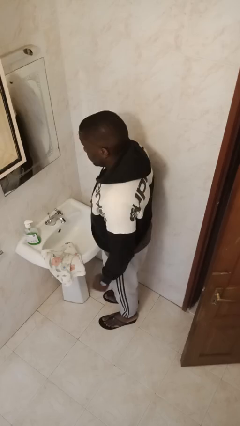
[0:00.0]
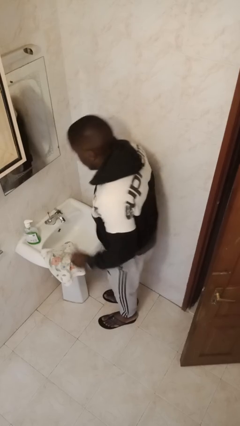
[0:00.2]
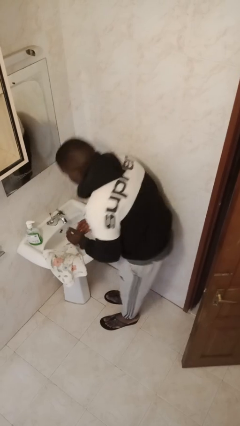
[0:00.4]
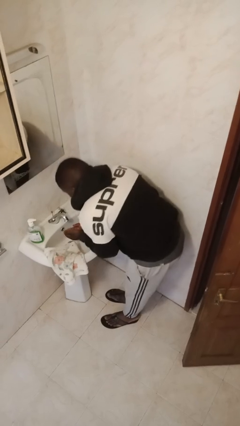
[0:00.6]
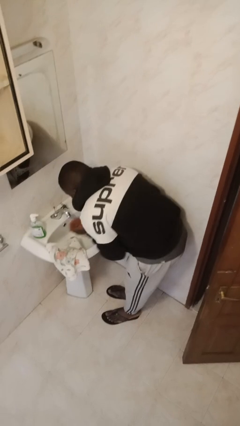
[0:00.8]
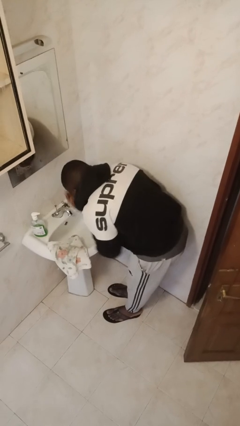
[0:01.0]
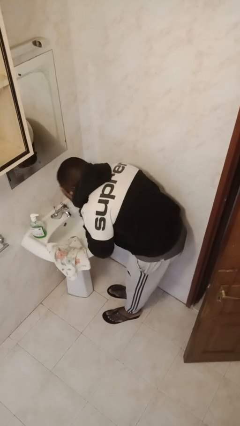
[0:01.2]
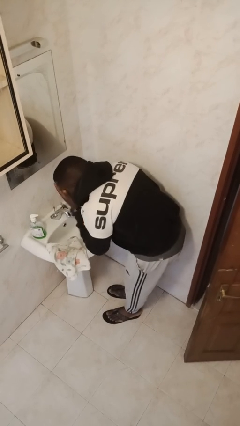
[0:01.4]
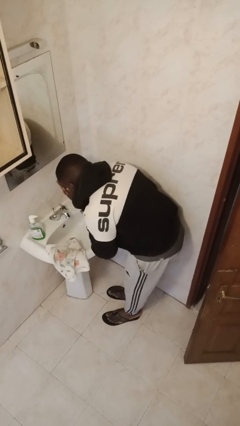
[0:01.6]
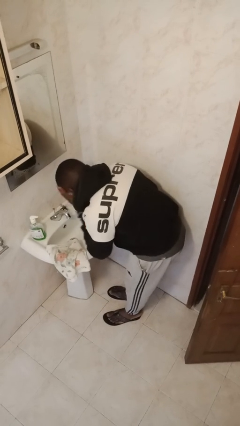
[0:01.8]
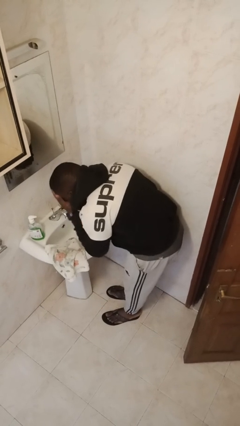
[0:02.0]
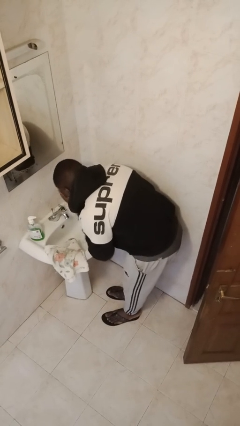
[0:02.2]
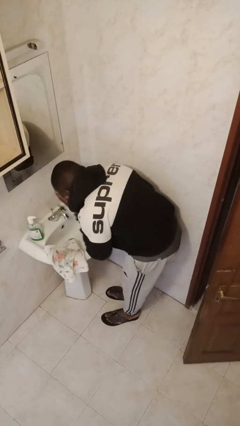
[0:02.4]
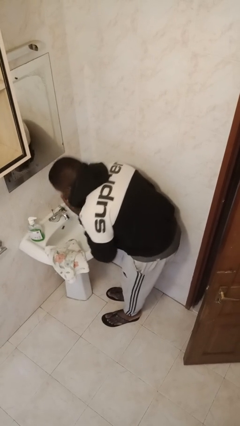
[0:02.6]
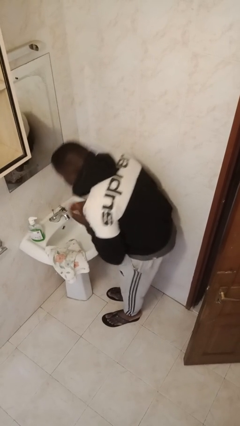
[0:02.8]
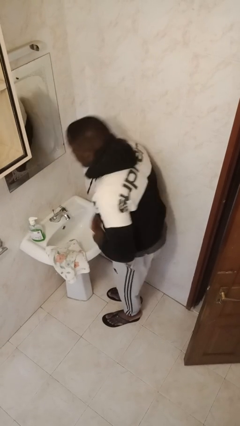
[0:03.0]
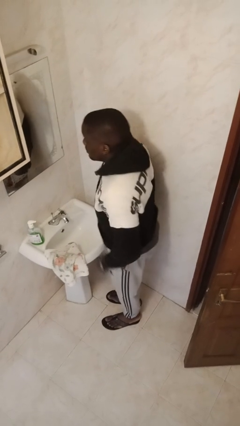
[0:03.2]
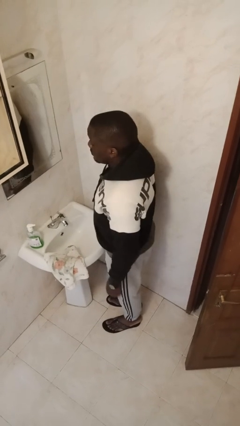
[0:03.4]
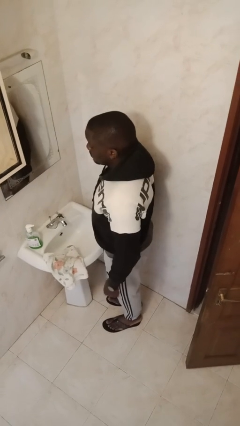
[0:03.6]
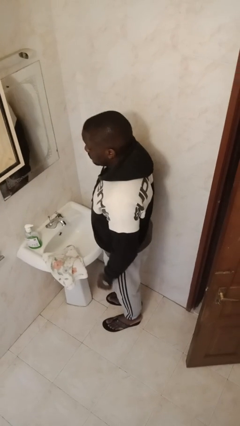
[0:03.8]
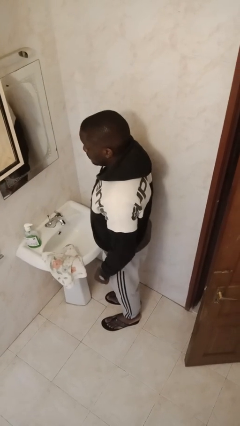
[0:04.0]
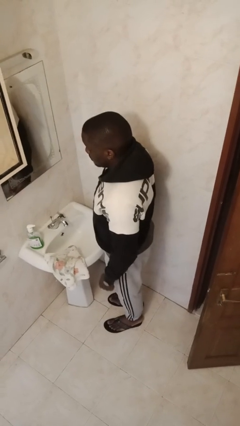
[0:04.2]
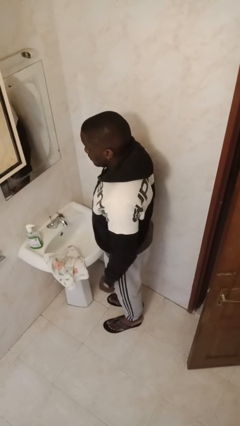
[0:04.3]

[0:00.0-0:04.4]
person washes face

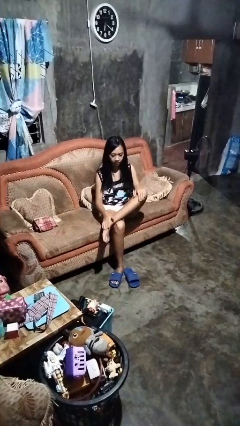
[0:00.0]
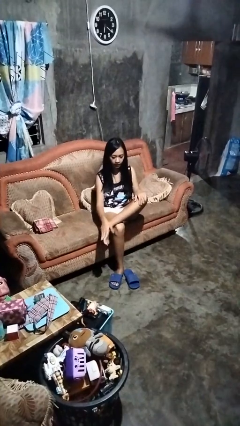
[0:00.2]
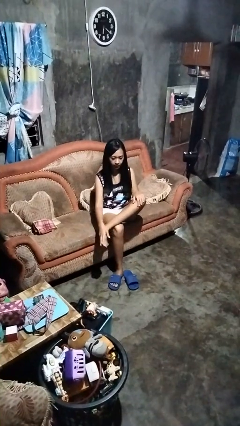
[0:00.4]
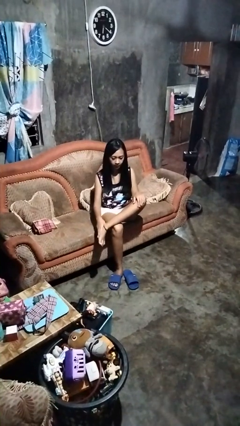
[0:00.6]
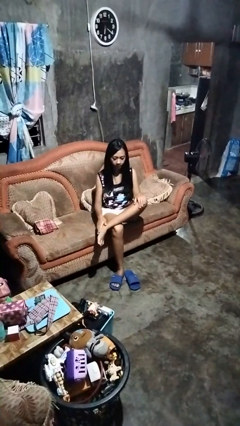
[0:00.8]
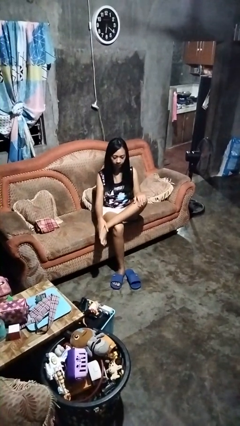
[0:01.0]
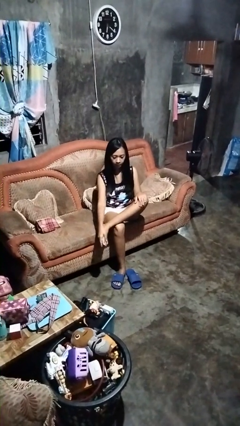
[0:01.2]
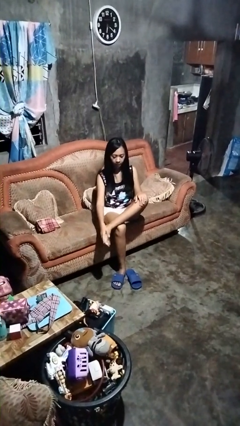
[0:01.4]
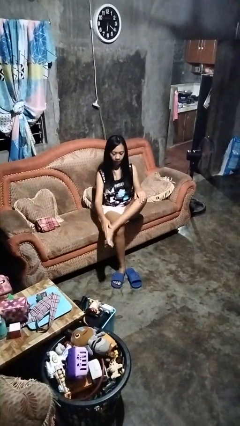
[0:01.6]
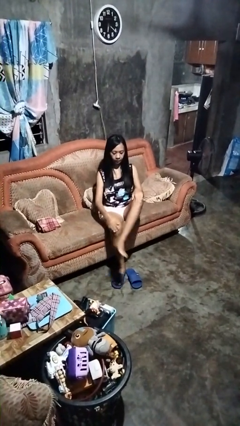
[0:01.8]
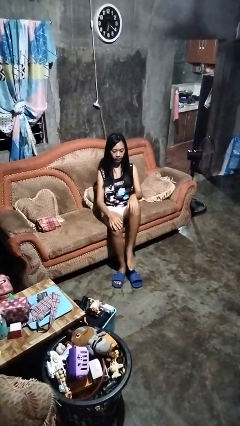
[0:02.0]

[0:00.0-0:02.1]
person rubs foot

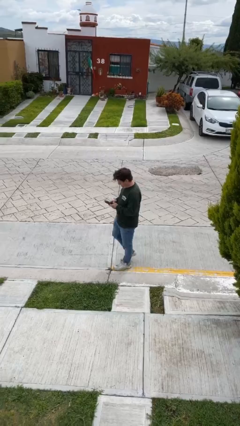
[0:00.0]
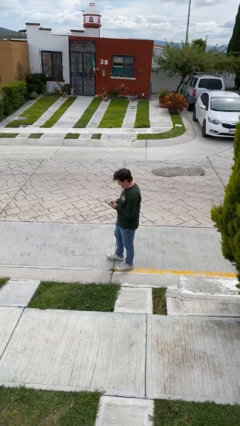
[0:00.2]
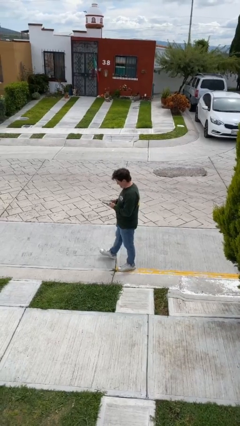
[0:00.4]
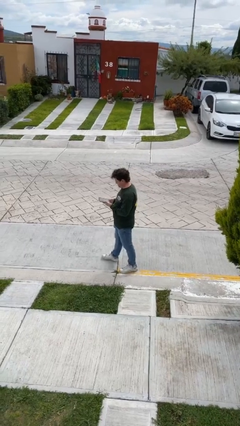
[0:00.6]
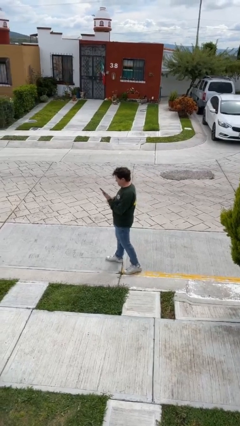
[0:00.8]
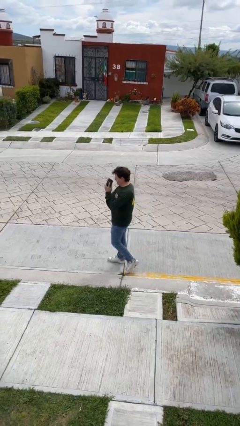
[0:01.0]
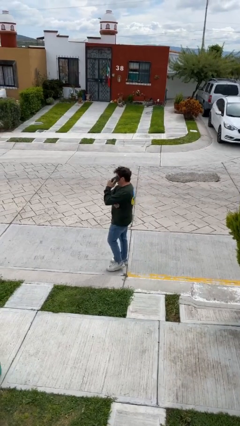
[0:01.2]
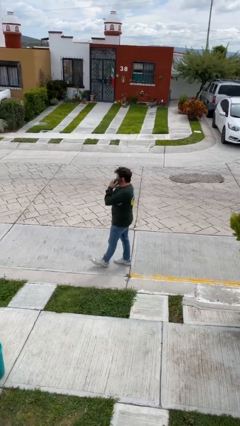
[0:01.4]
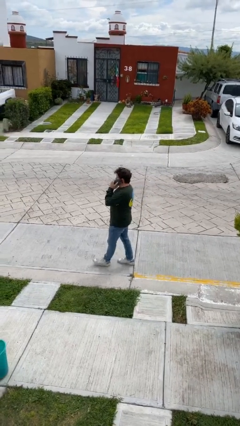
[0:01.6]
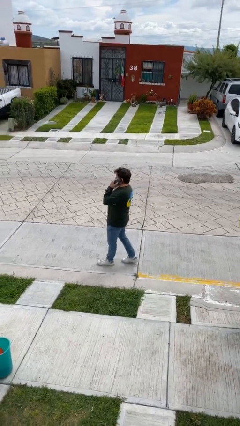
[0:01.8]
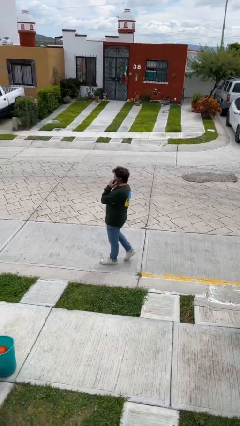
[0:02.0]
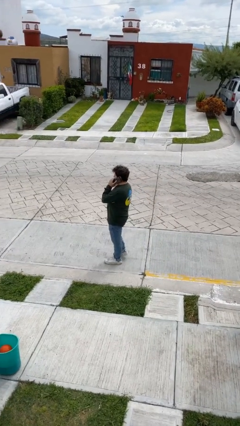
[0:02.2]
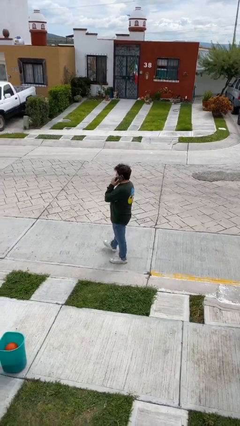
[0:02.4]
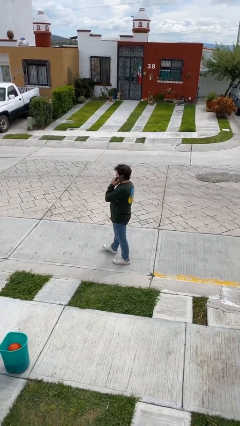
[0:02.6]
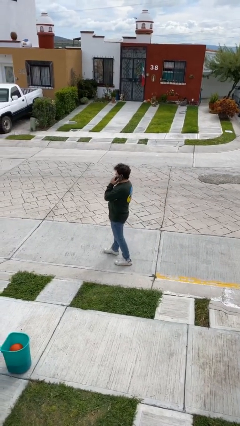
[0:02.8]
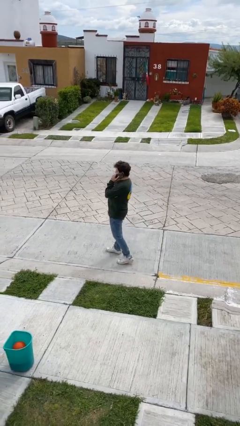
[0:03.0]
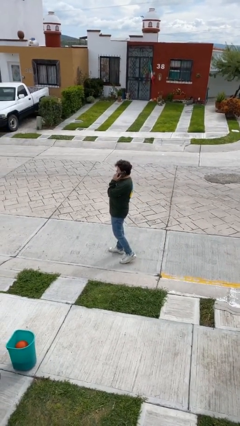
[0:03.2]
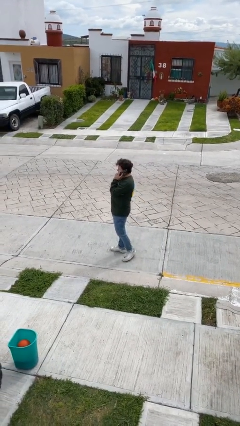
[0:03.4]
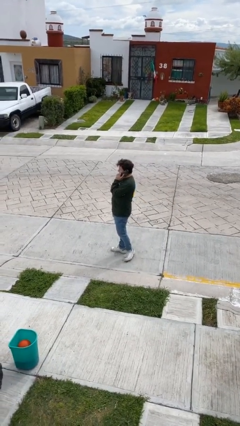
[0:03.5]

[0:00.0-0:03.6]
person talks on phone

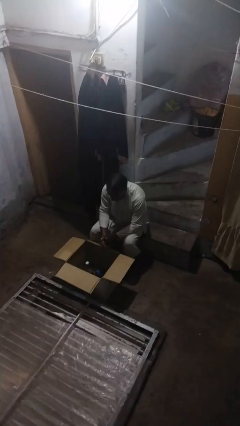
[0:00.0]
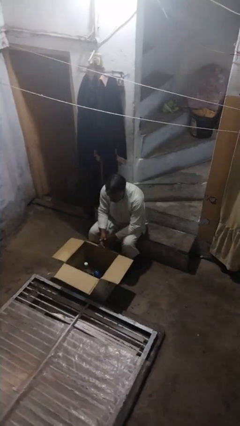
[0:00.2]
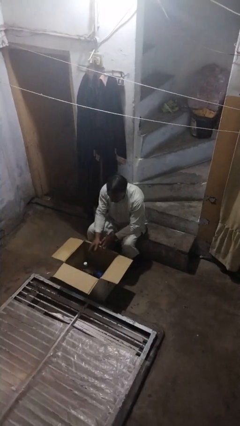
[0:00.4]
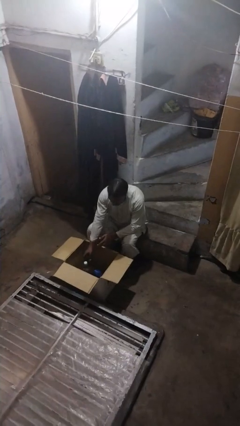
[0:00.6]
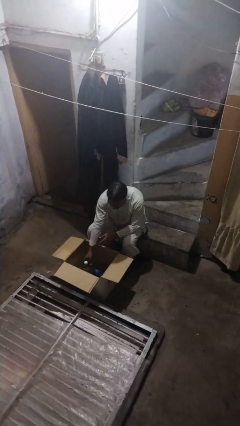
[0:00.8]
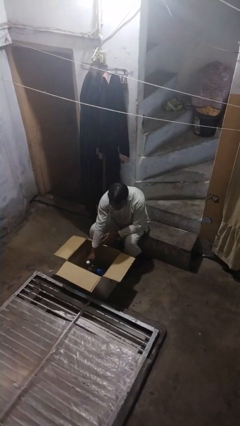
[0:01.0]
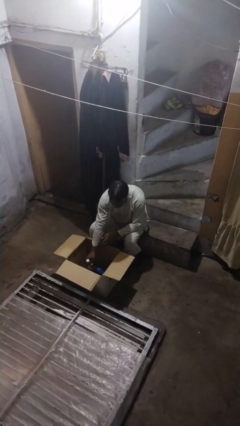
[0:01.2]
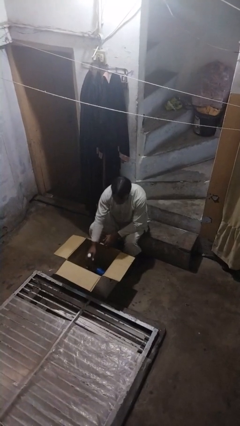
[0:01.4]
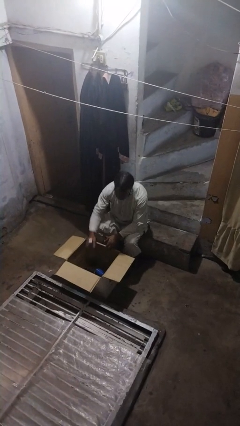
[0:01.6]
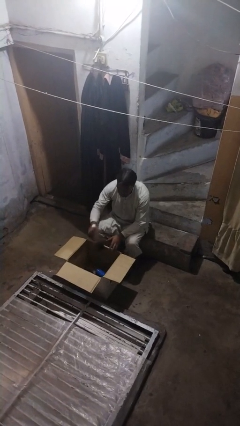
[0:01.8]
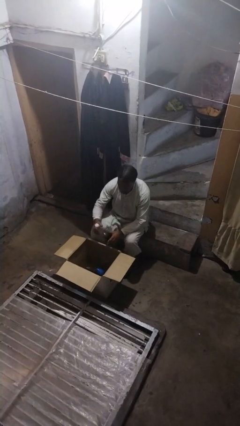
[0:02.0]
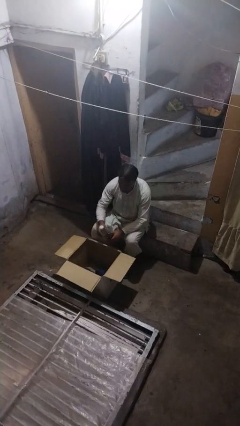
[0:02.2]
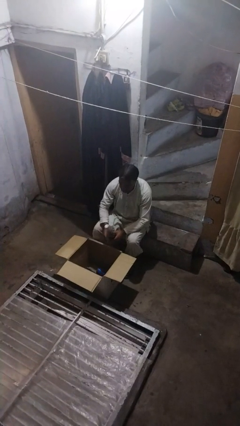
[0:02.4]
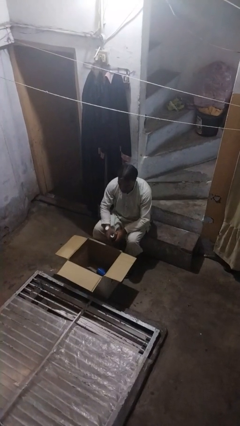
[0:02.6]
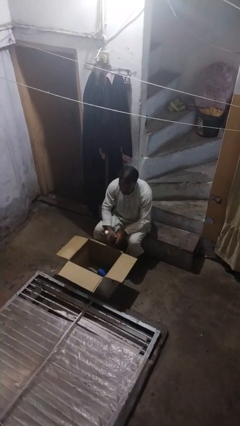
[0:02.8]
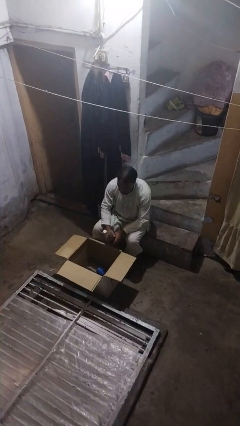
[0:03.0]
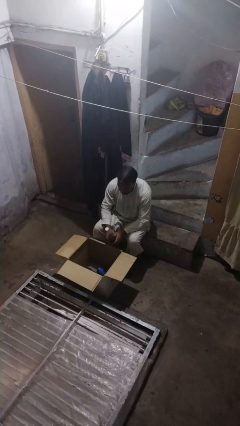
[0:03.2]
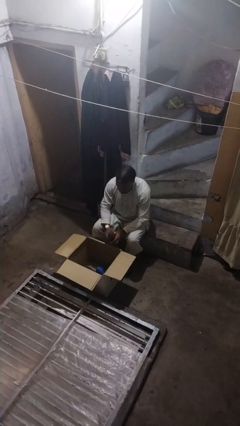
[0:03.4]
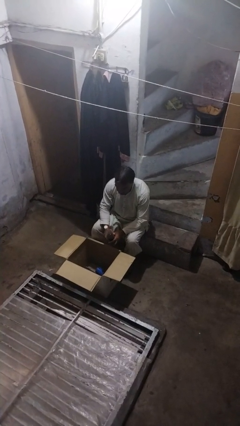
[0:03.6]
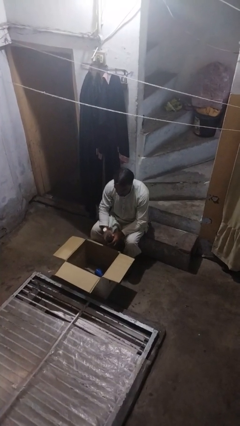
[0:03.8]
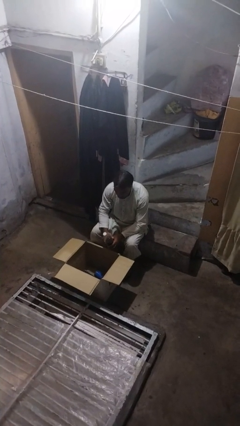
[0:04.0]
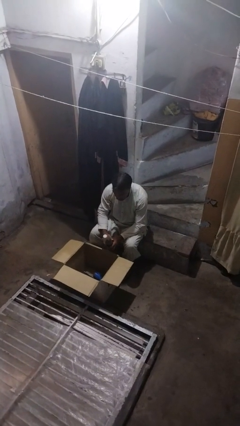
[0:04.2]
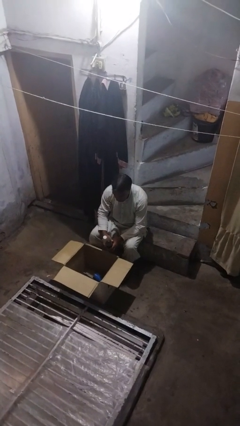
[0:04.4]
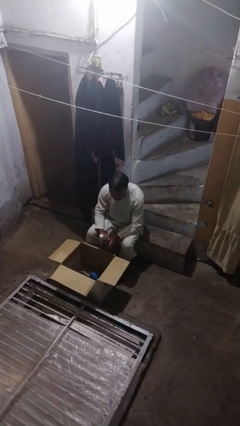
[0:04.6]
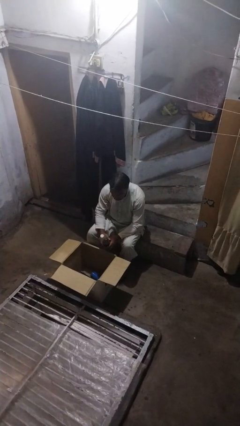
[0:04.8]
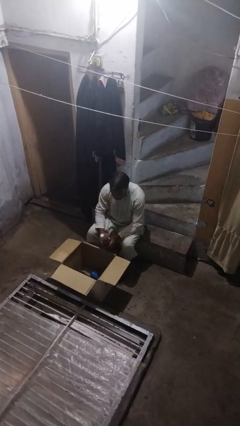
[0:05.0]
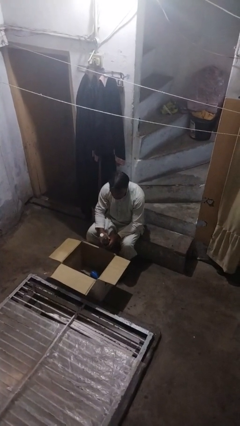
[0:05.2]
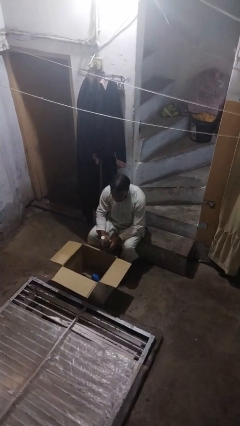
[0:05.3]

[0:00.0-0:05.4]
person takes object from box

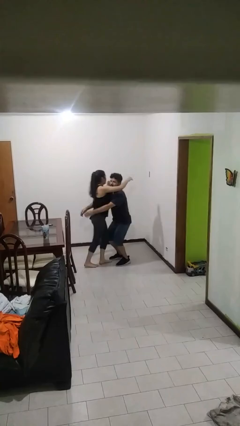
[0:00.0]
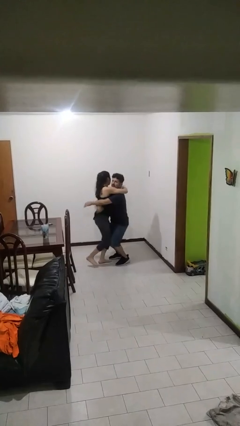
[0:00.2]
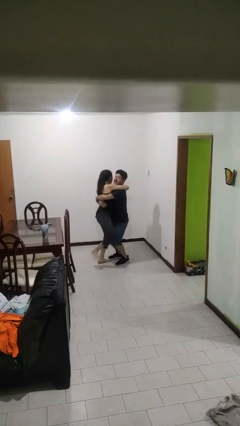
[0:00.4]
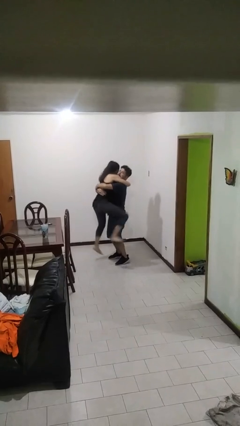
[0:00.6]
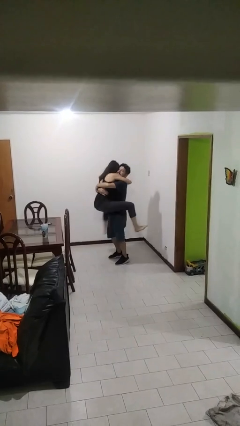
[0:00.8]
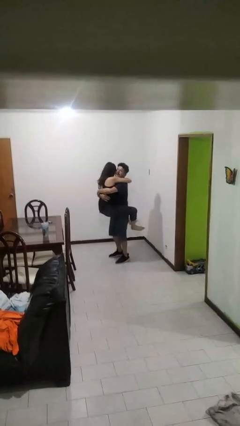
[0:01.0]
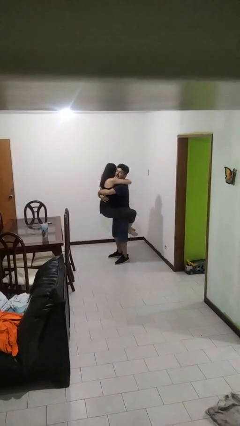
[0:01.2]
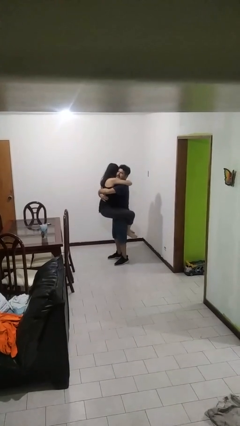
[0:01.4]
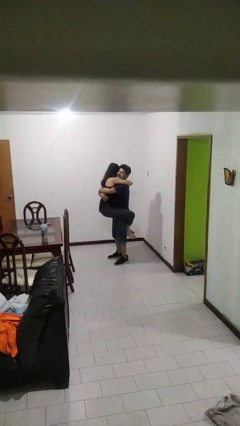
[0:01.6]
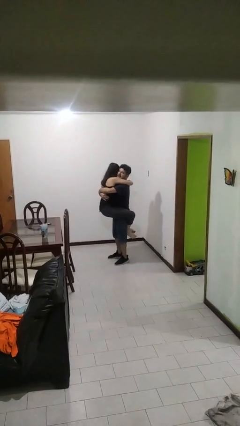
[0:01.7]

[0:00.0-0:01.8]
person picks up person

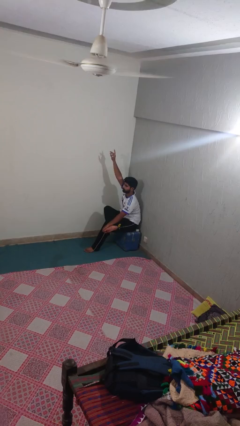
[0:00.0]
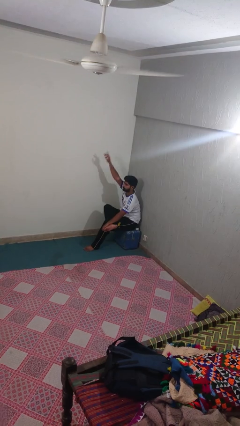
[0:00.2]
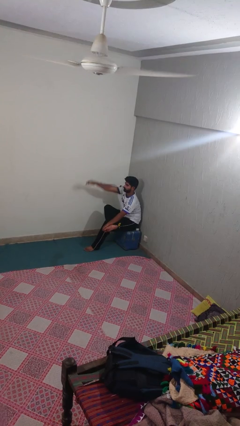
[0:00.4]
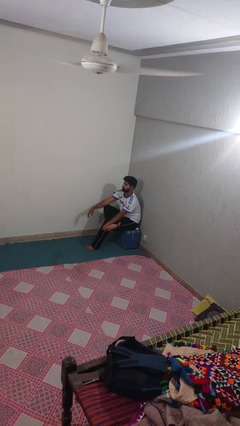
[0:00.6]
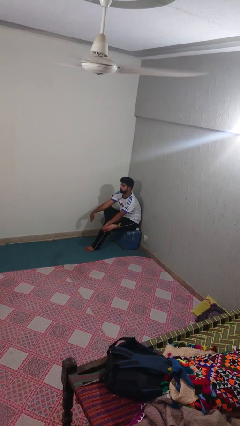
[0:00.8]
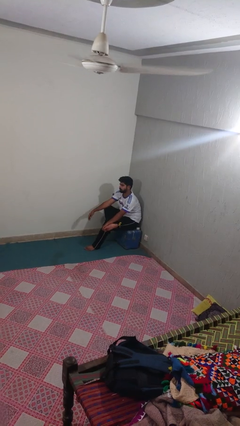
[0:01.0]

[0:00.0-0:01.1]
person gestures lower hand
